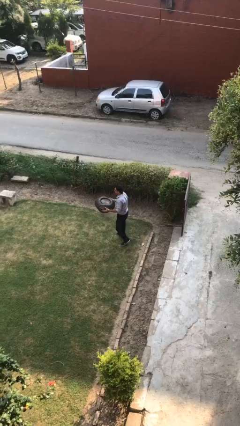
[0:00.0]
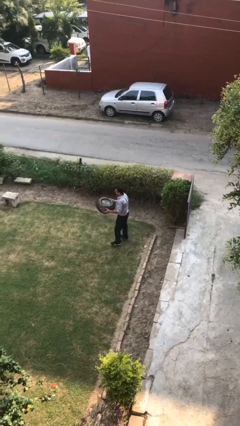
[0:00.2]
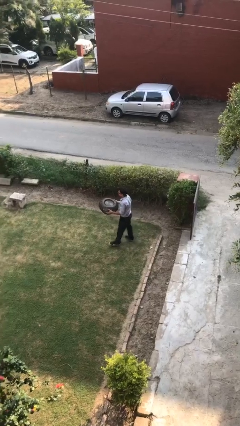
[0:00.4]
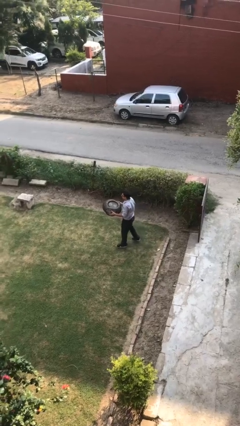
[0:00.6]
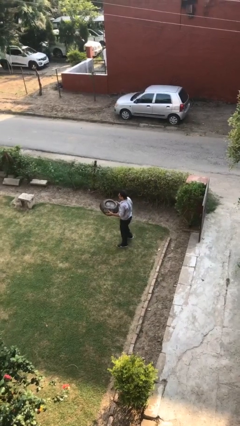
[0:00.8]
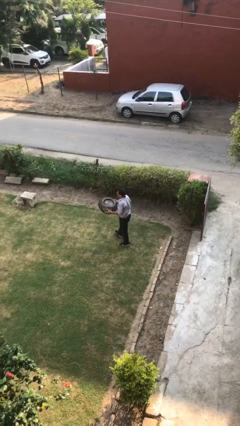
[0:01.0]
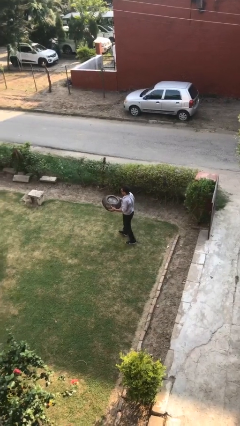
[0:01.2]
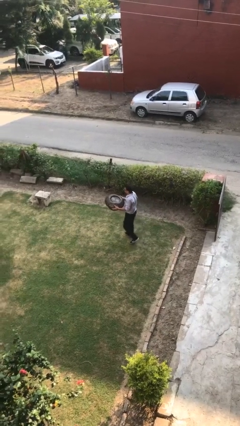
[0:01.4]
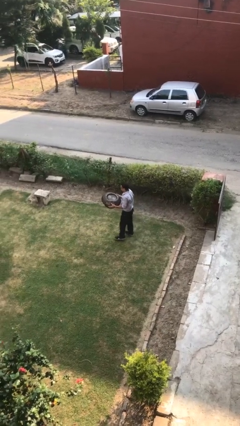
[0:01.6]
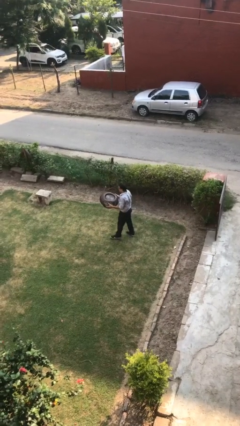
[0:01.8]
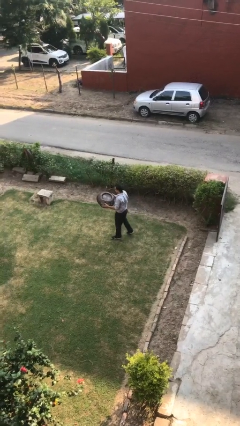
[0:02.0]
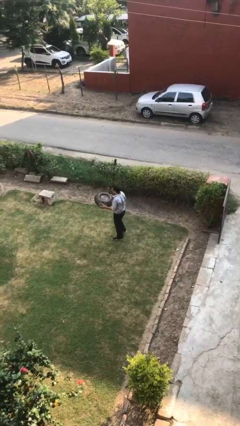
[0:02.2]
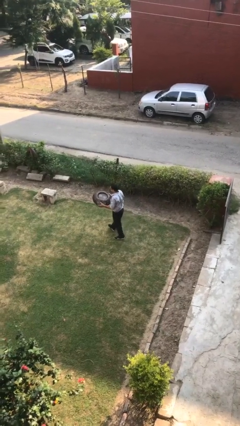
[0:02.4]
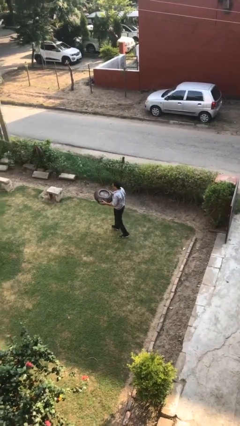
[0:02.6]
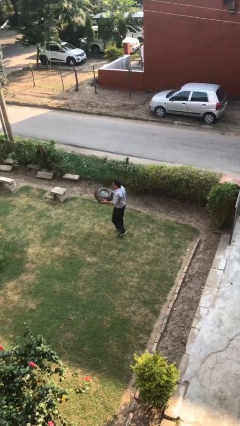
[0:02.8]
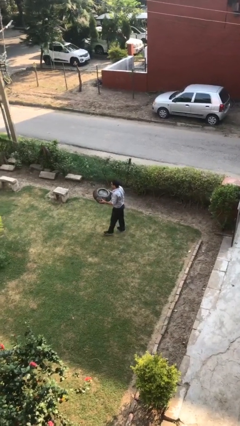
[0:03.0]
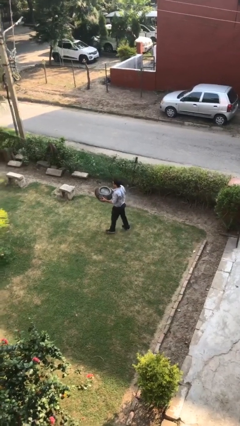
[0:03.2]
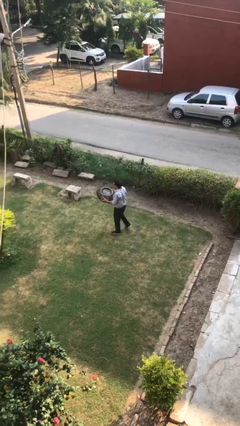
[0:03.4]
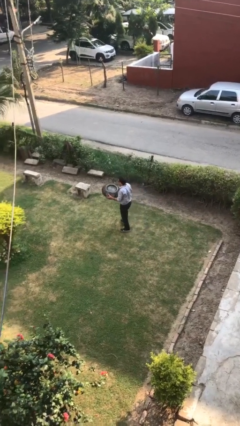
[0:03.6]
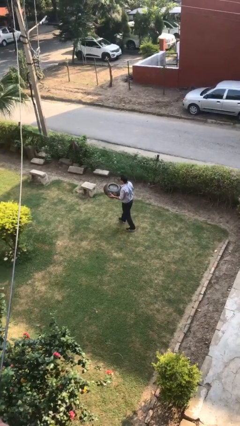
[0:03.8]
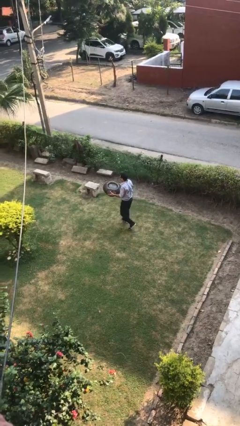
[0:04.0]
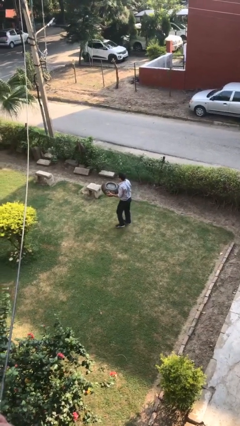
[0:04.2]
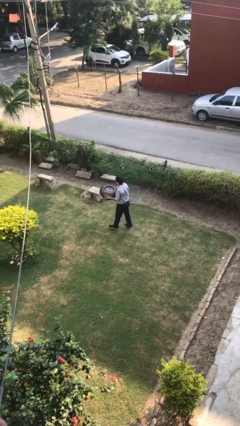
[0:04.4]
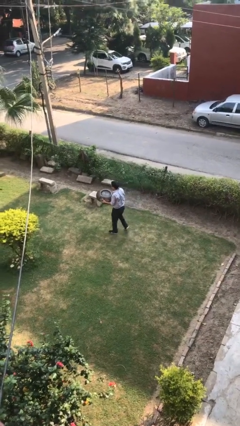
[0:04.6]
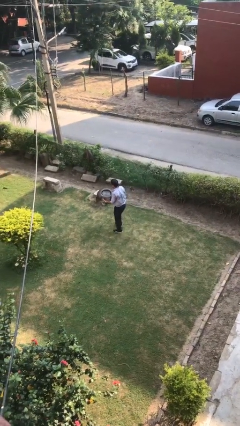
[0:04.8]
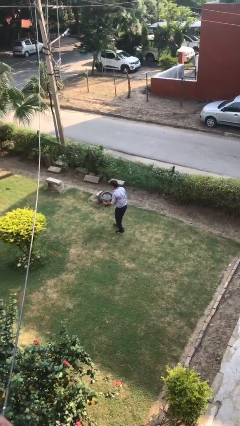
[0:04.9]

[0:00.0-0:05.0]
person carries heavy object

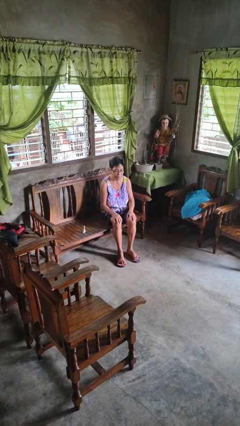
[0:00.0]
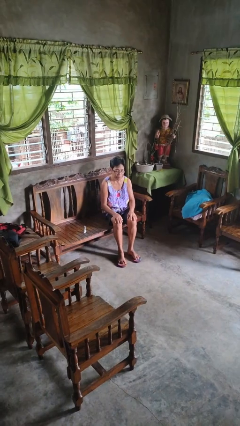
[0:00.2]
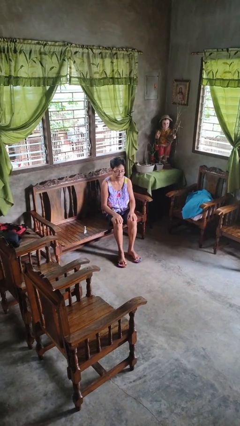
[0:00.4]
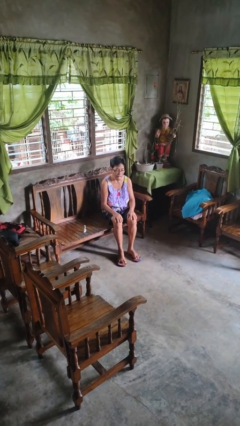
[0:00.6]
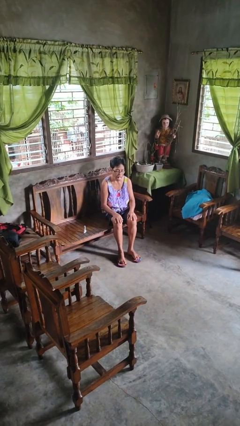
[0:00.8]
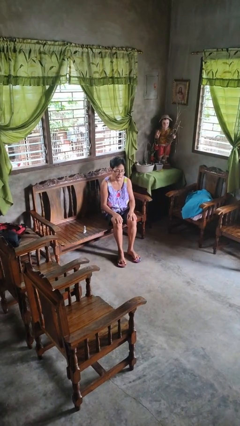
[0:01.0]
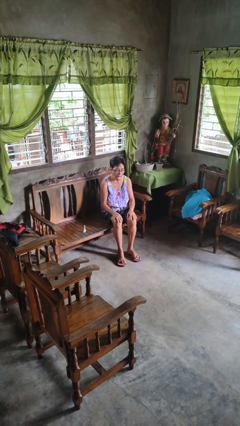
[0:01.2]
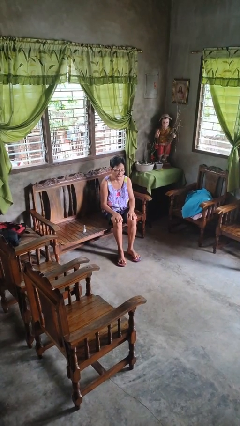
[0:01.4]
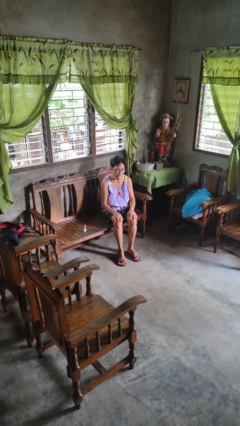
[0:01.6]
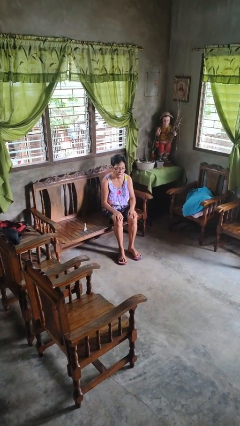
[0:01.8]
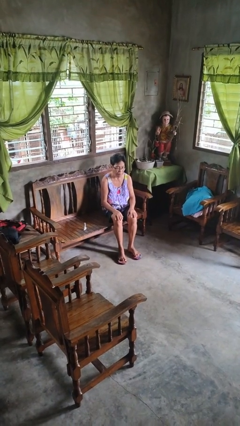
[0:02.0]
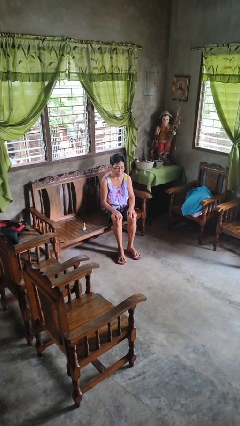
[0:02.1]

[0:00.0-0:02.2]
person sticks out tongue

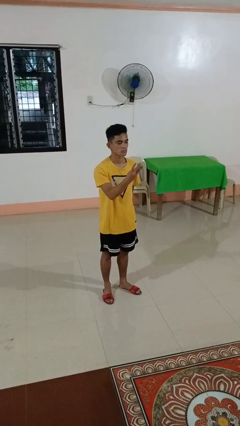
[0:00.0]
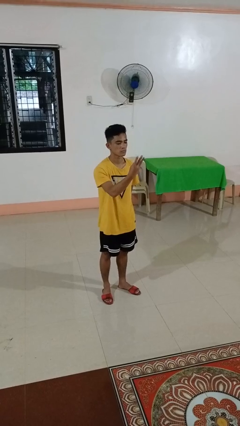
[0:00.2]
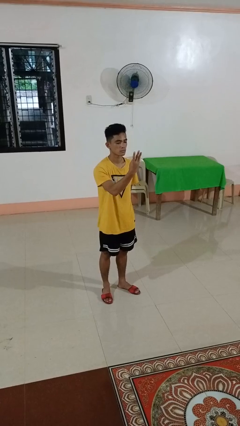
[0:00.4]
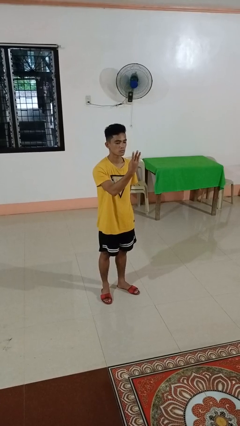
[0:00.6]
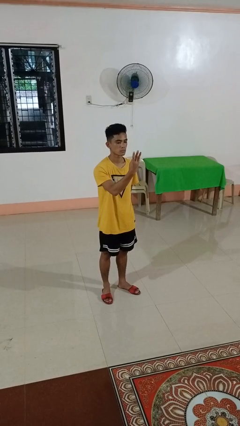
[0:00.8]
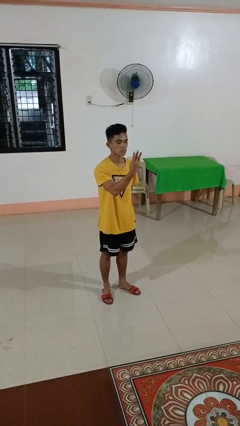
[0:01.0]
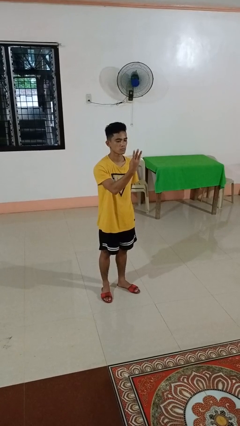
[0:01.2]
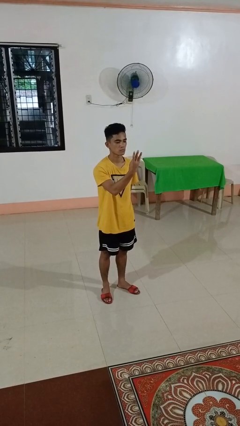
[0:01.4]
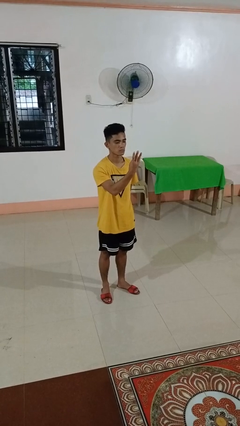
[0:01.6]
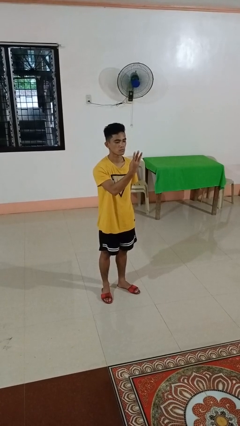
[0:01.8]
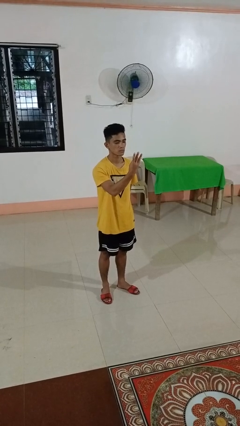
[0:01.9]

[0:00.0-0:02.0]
person gestures number three

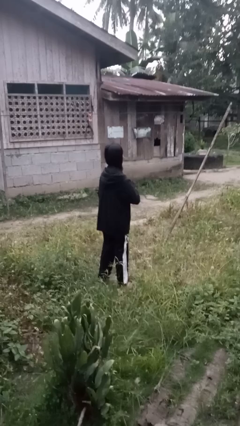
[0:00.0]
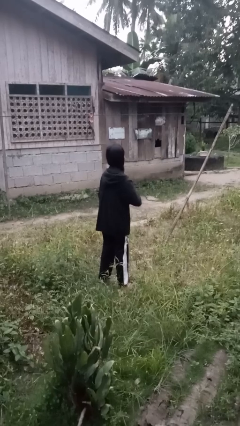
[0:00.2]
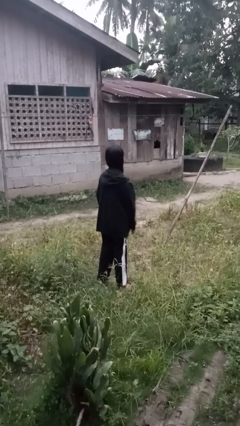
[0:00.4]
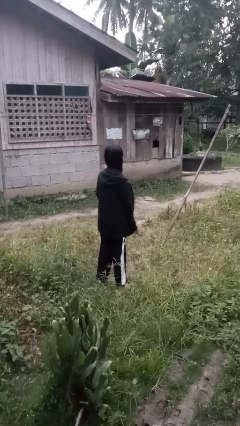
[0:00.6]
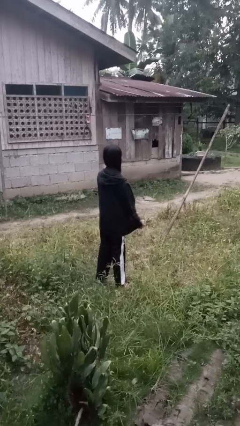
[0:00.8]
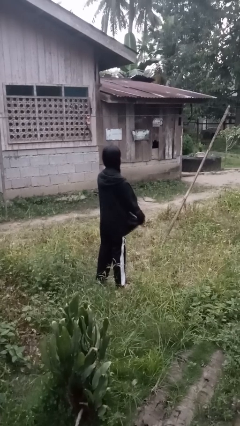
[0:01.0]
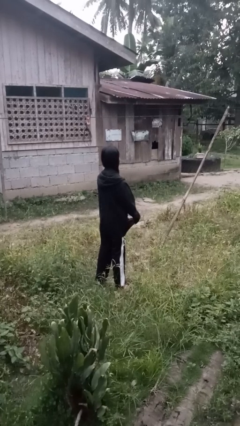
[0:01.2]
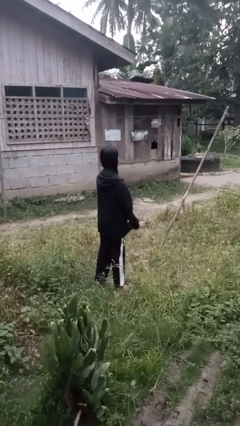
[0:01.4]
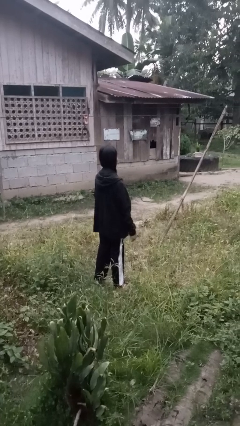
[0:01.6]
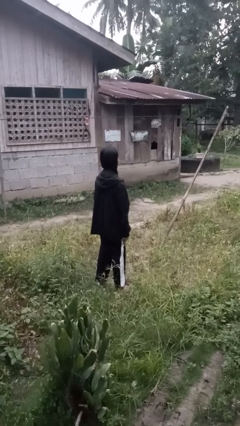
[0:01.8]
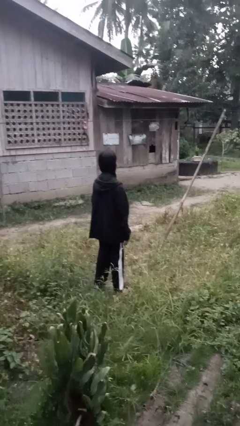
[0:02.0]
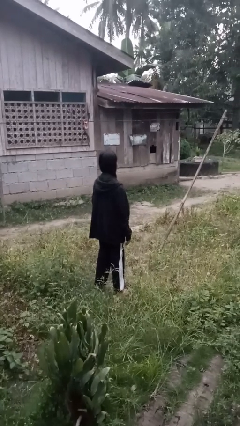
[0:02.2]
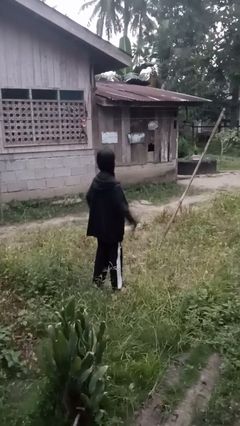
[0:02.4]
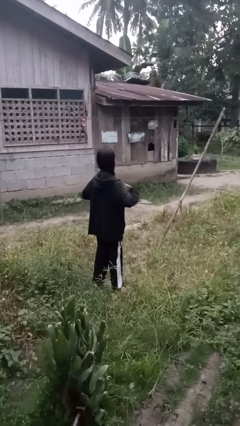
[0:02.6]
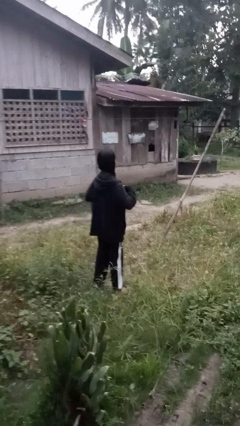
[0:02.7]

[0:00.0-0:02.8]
person unzips jacket

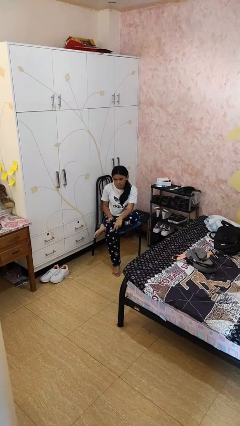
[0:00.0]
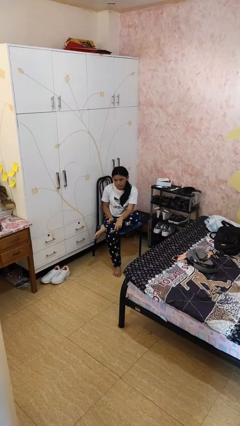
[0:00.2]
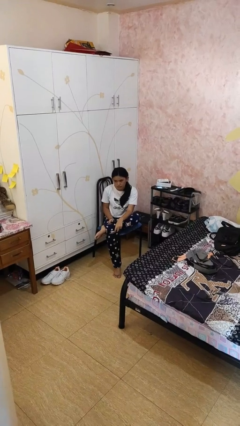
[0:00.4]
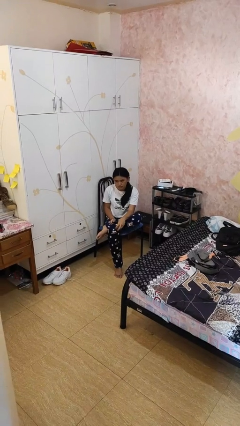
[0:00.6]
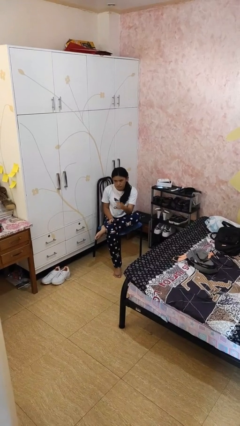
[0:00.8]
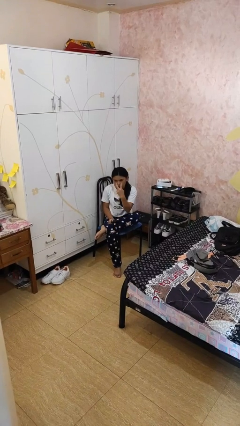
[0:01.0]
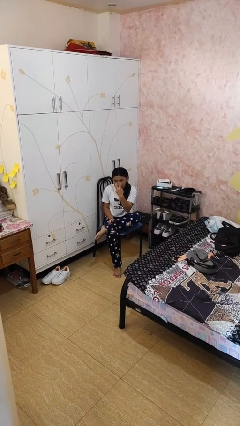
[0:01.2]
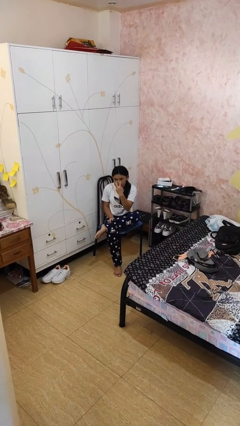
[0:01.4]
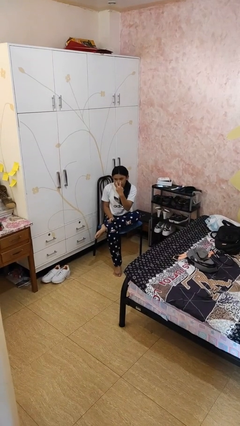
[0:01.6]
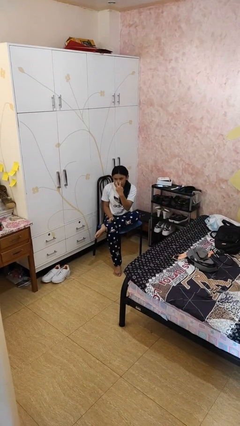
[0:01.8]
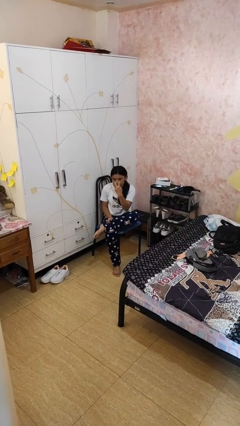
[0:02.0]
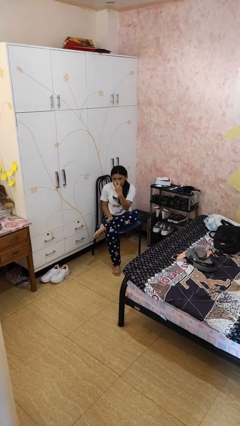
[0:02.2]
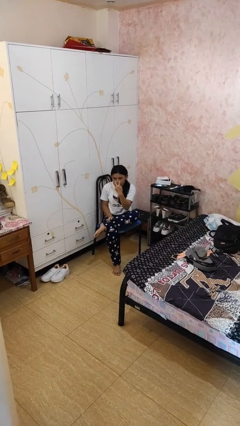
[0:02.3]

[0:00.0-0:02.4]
person gestures watch closely

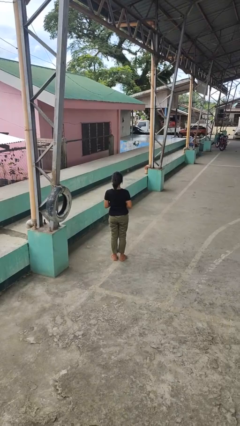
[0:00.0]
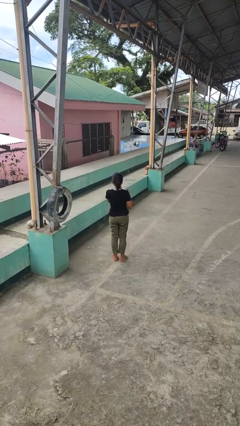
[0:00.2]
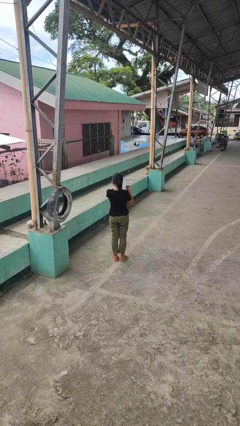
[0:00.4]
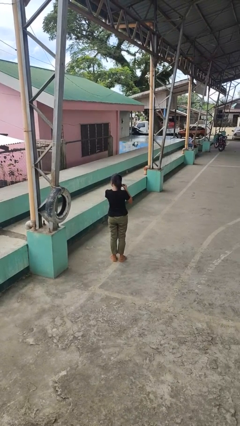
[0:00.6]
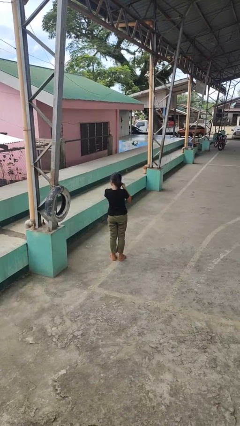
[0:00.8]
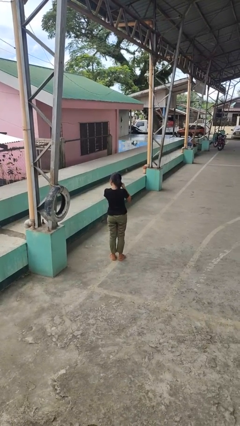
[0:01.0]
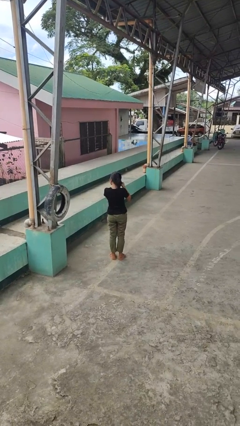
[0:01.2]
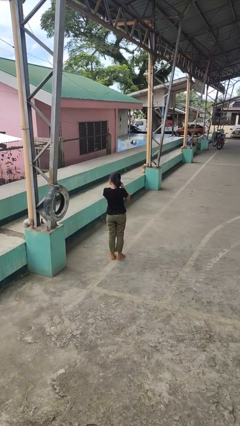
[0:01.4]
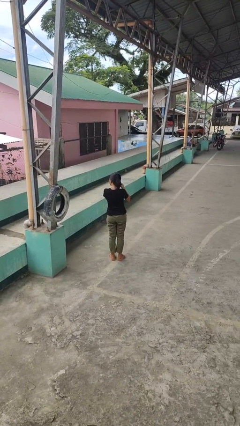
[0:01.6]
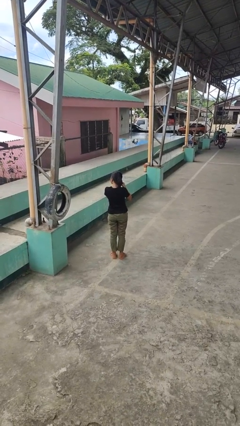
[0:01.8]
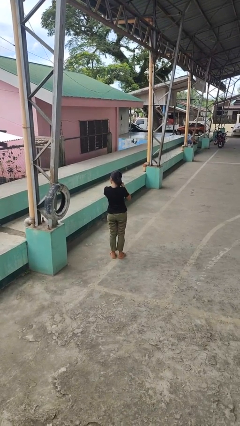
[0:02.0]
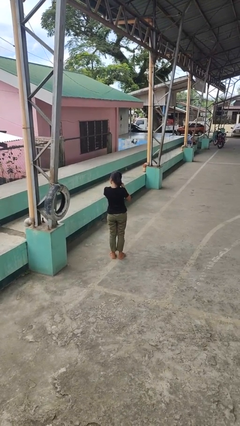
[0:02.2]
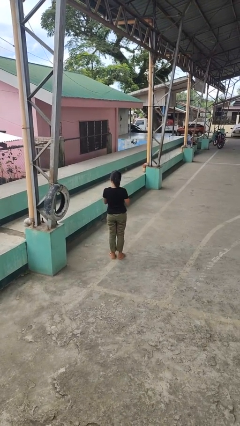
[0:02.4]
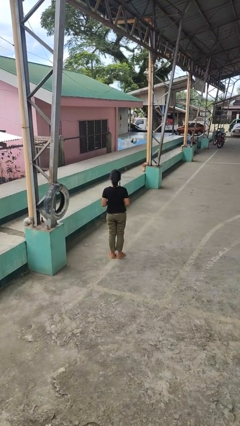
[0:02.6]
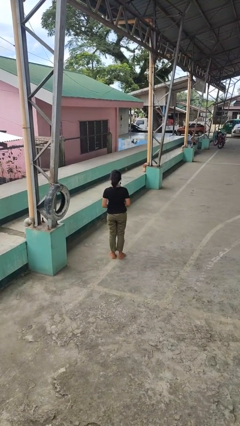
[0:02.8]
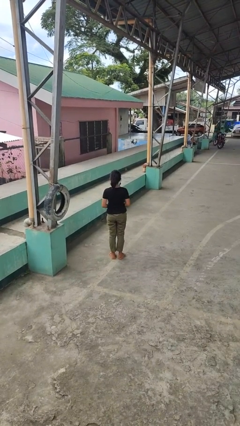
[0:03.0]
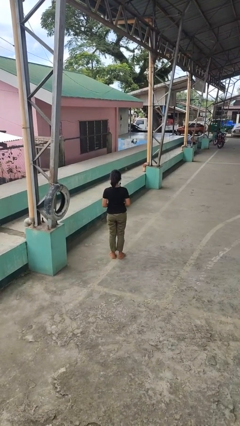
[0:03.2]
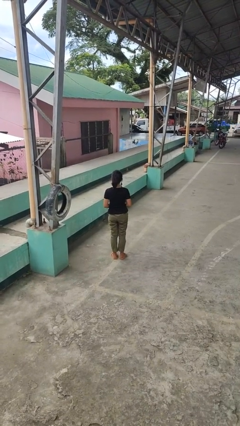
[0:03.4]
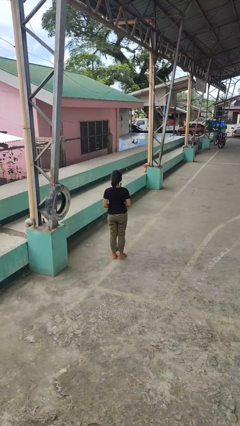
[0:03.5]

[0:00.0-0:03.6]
person puts on earrings
